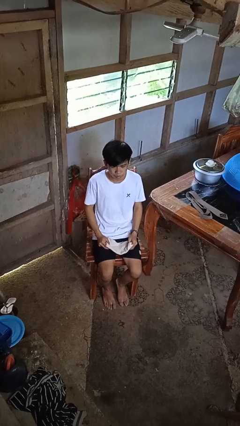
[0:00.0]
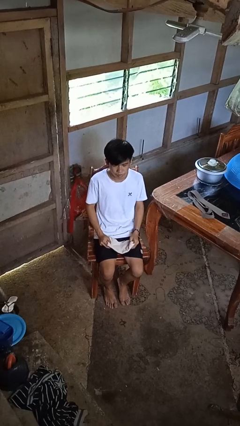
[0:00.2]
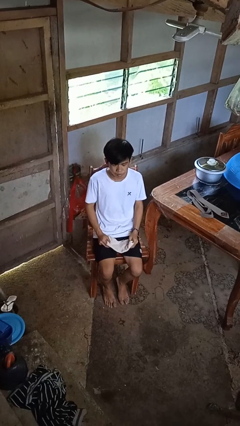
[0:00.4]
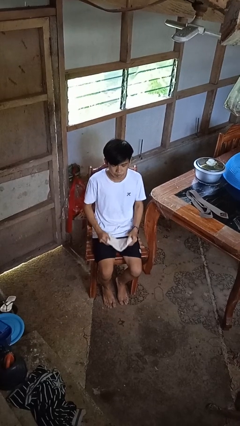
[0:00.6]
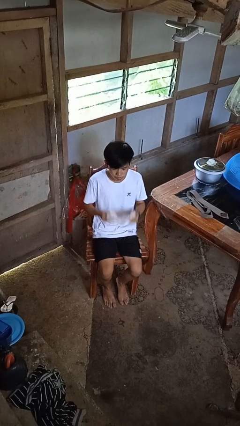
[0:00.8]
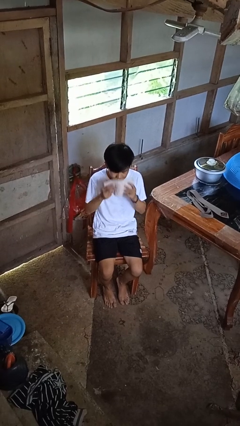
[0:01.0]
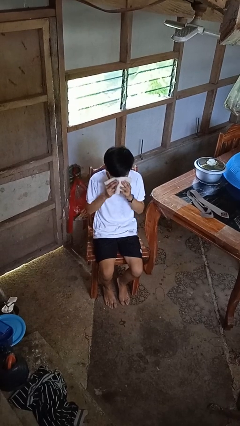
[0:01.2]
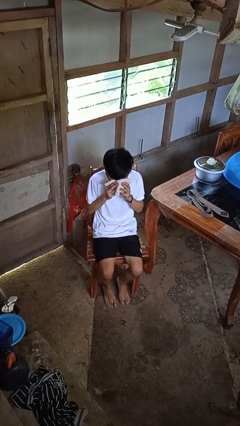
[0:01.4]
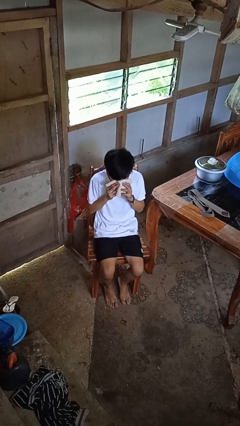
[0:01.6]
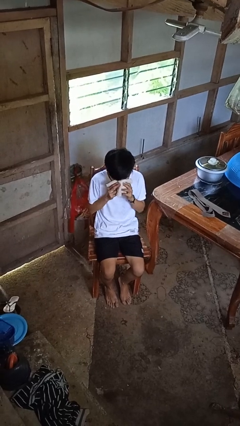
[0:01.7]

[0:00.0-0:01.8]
person blows nose

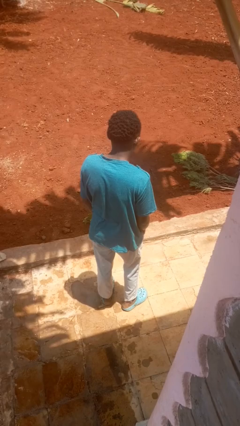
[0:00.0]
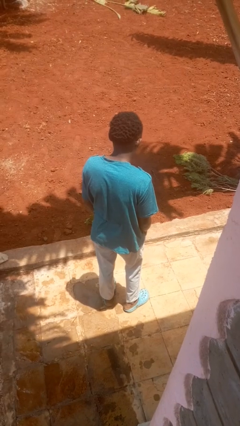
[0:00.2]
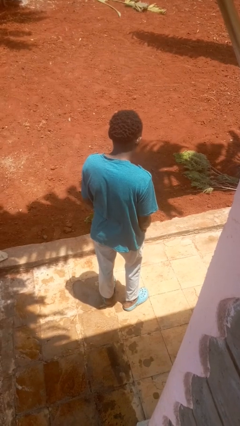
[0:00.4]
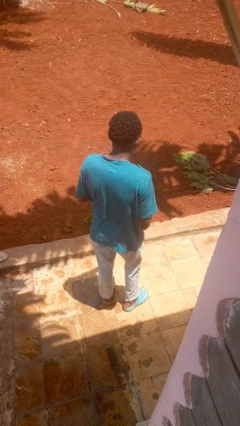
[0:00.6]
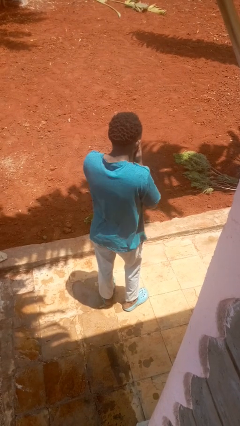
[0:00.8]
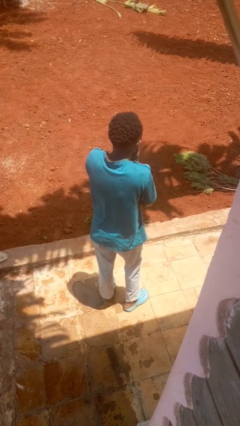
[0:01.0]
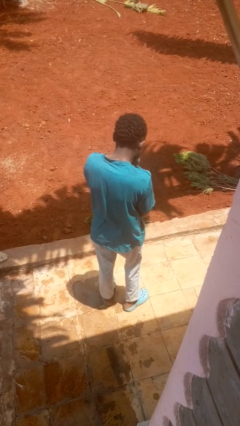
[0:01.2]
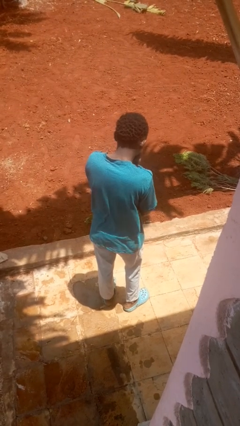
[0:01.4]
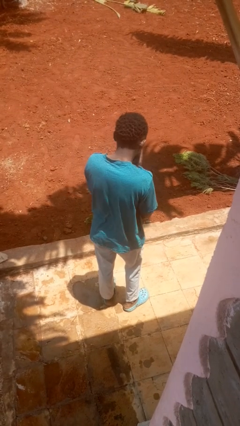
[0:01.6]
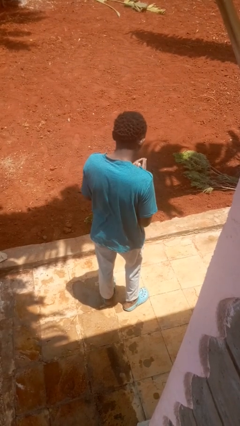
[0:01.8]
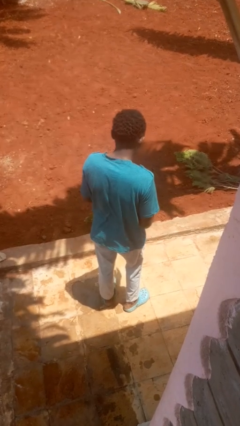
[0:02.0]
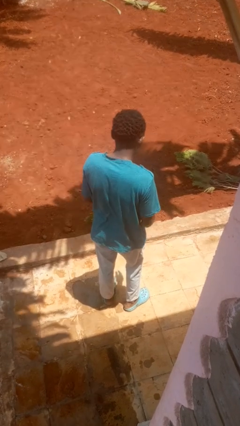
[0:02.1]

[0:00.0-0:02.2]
person sneezes into hand

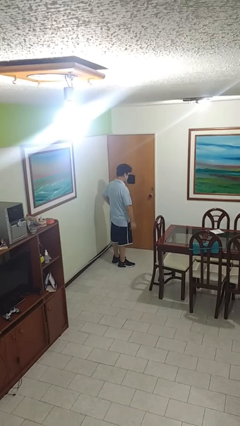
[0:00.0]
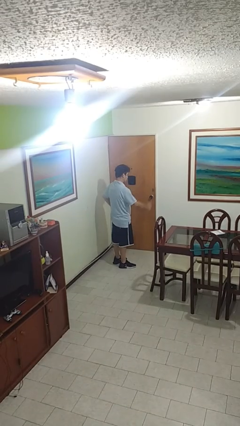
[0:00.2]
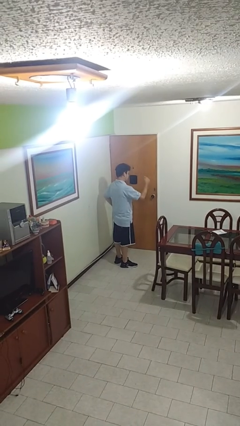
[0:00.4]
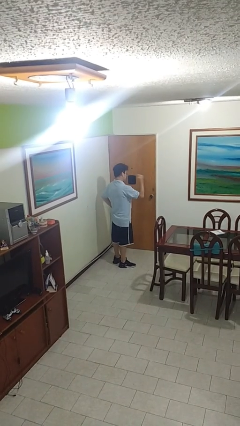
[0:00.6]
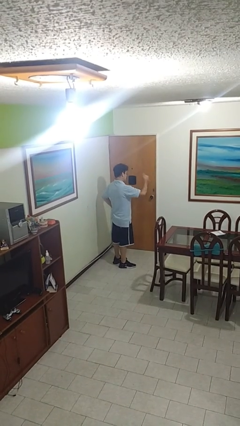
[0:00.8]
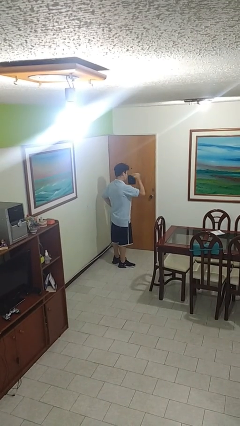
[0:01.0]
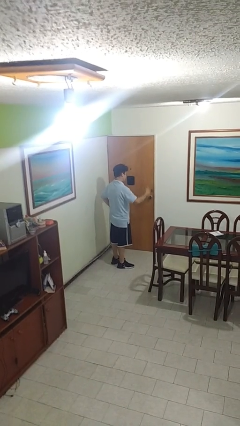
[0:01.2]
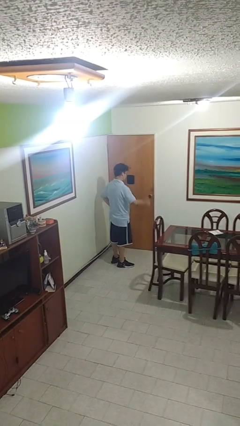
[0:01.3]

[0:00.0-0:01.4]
person gestures behind me

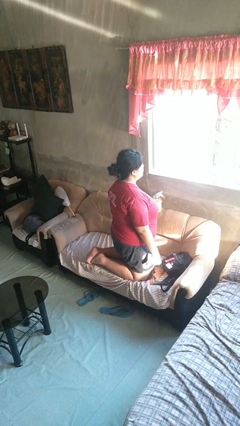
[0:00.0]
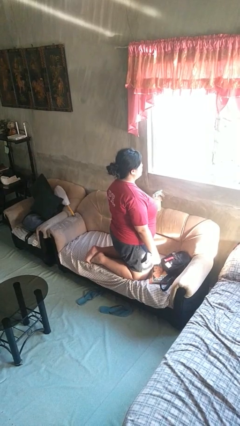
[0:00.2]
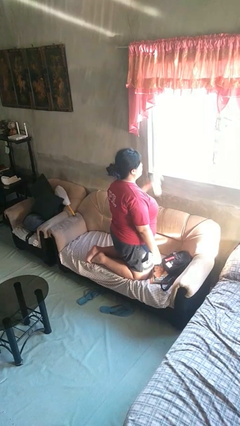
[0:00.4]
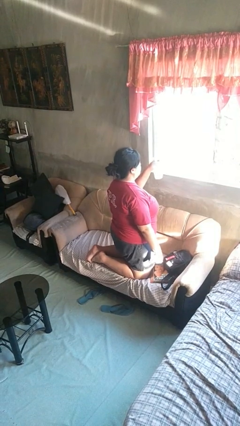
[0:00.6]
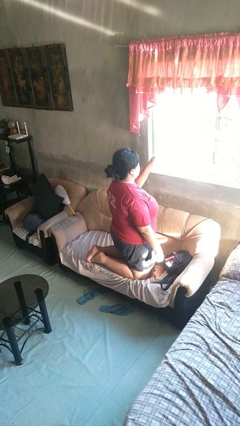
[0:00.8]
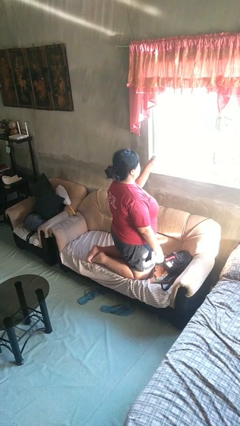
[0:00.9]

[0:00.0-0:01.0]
person sprays from bottle

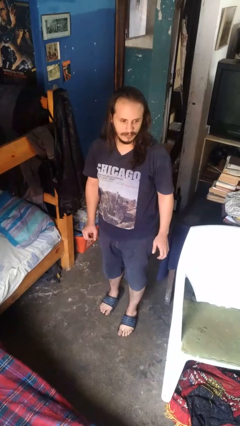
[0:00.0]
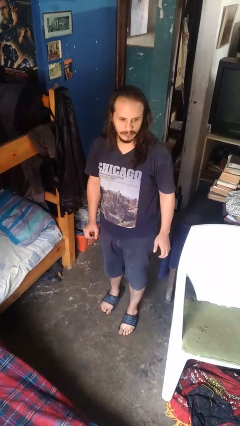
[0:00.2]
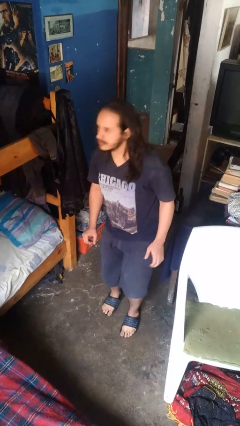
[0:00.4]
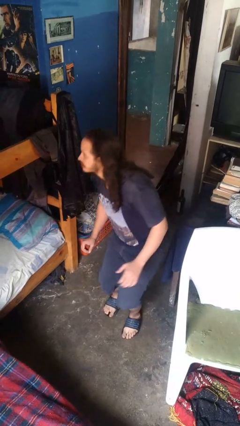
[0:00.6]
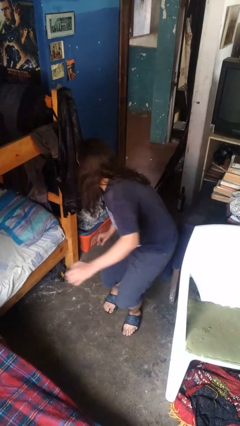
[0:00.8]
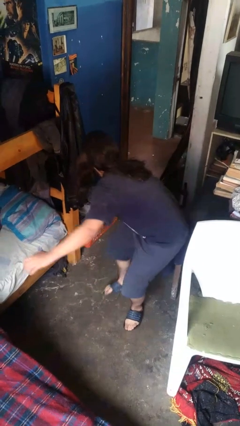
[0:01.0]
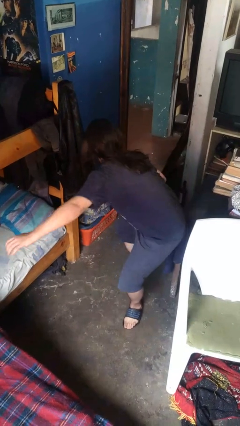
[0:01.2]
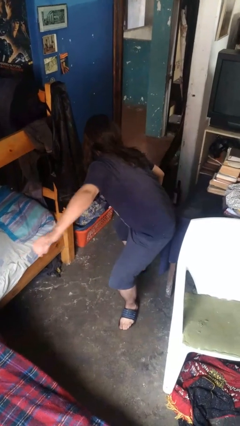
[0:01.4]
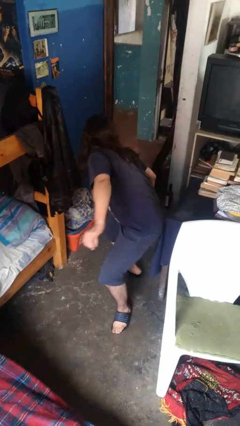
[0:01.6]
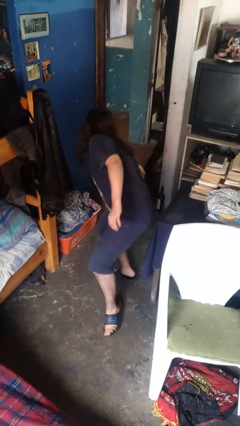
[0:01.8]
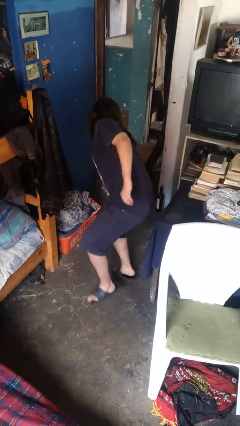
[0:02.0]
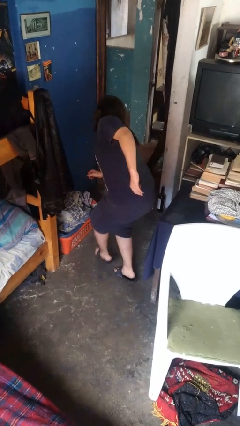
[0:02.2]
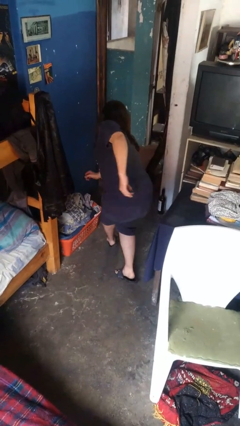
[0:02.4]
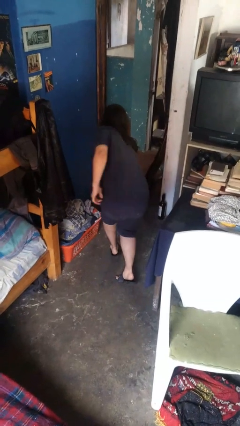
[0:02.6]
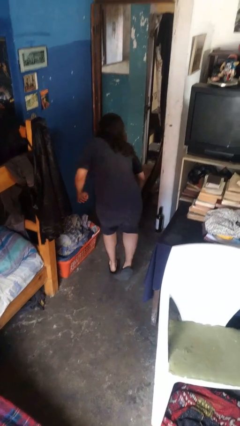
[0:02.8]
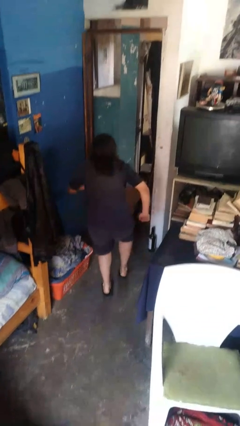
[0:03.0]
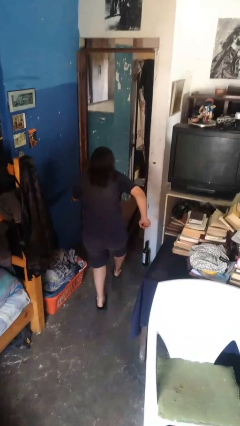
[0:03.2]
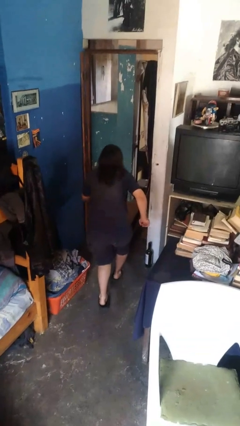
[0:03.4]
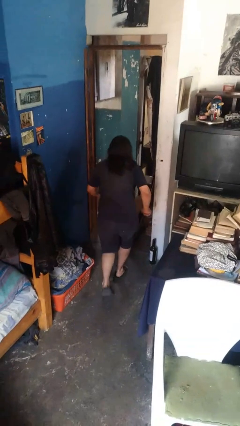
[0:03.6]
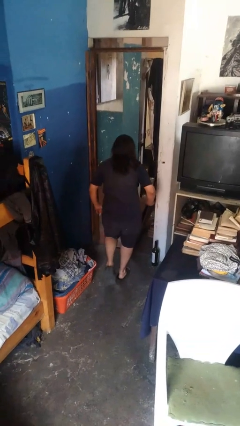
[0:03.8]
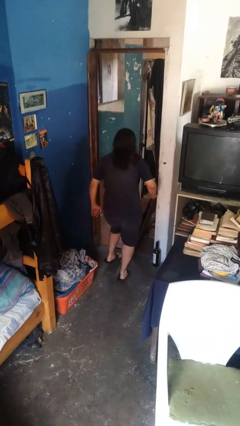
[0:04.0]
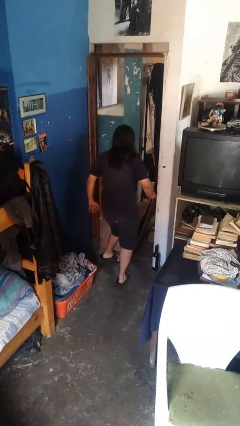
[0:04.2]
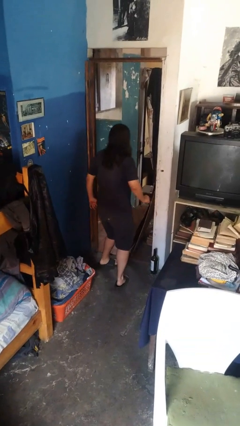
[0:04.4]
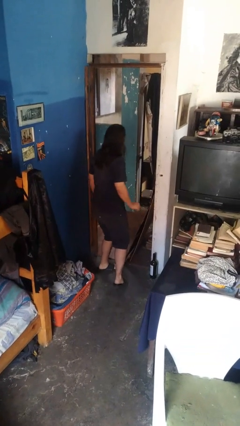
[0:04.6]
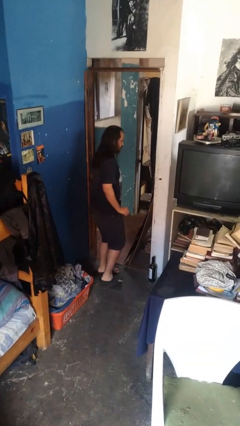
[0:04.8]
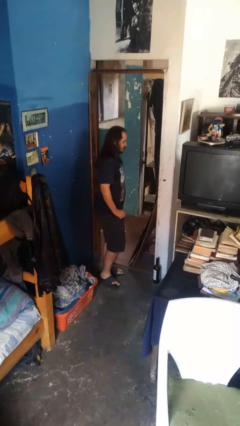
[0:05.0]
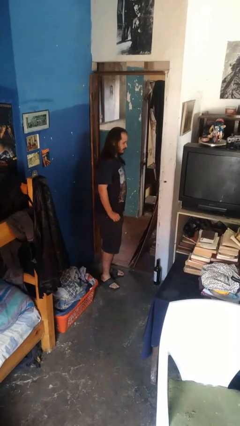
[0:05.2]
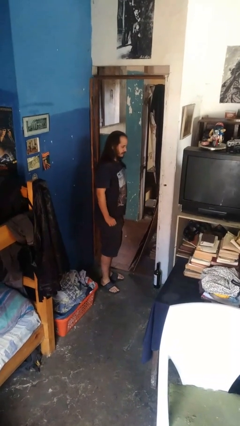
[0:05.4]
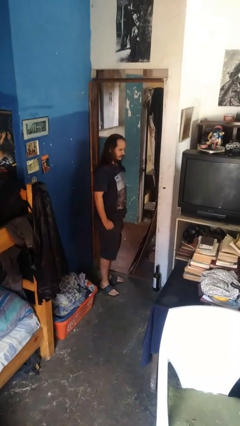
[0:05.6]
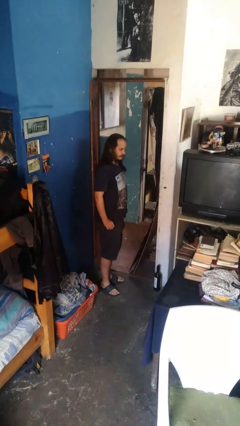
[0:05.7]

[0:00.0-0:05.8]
person walks tiptoe

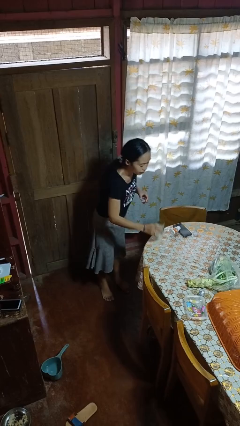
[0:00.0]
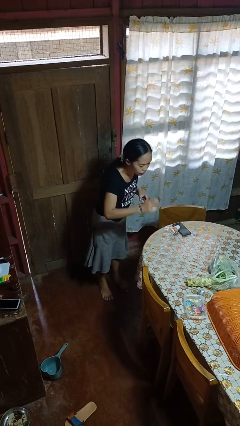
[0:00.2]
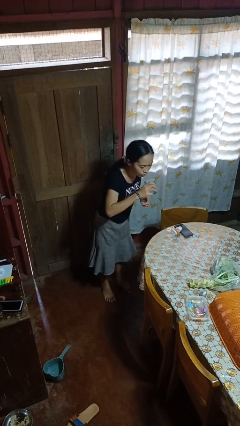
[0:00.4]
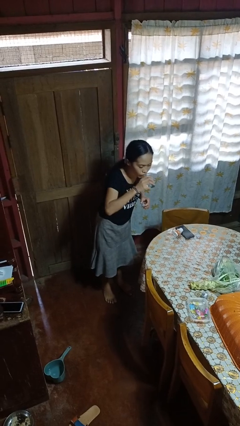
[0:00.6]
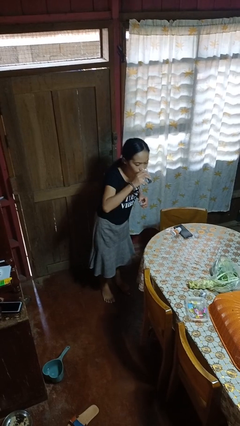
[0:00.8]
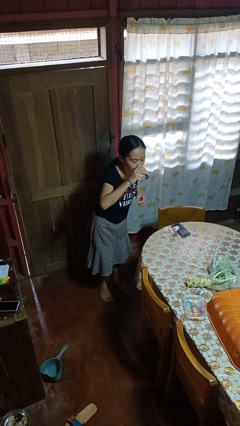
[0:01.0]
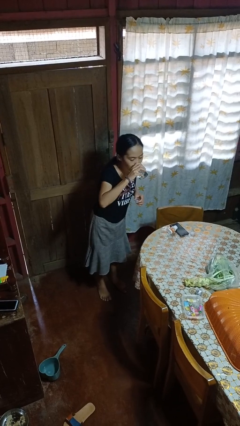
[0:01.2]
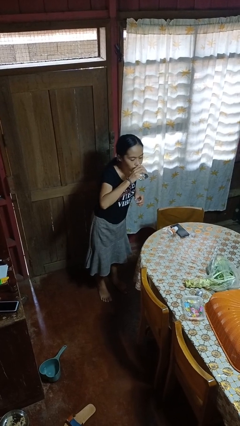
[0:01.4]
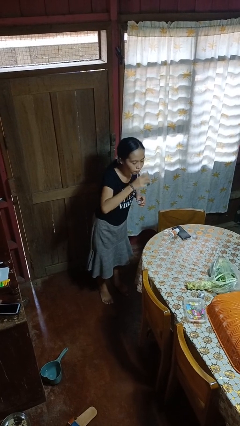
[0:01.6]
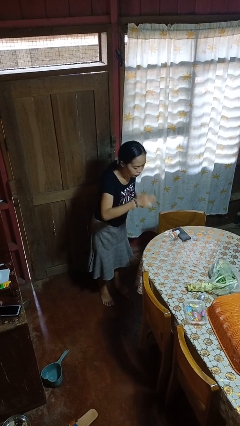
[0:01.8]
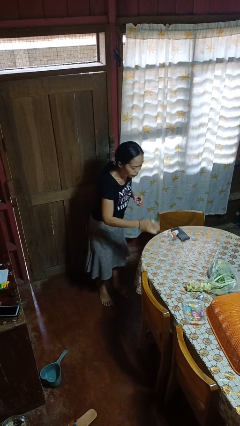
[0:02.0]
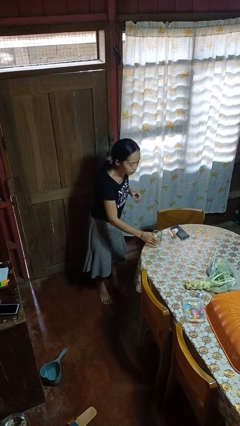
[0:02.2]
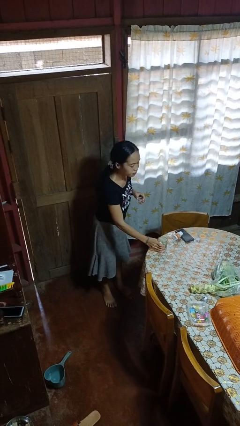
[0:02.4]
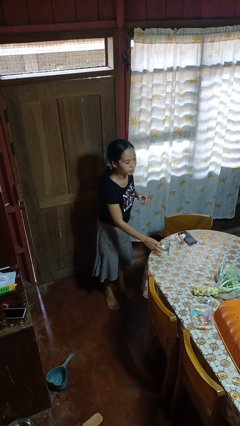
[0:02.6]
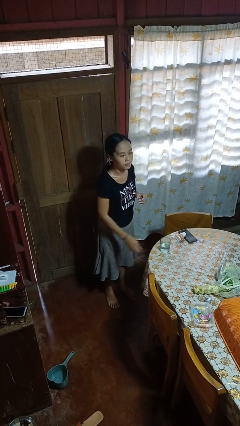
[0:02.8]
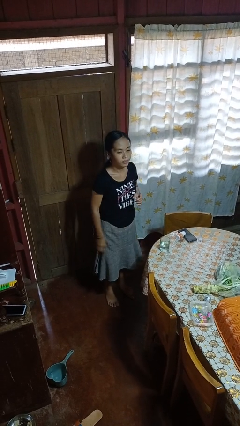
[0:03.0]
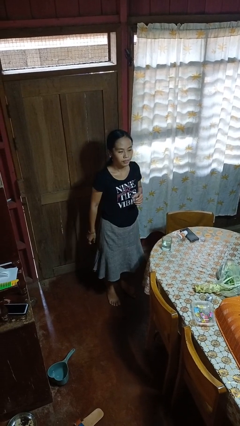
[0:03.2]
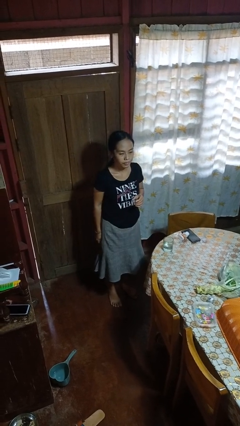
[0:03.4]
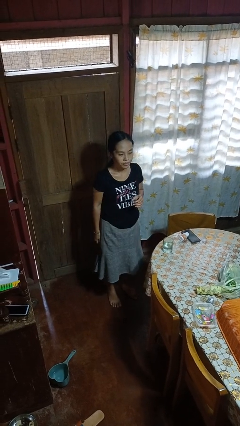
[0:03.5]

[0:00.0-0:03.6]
person drinks from cup

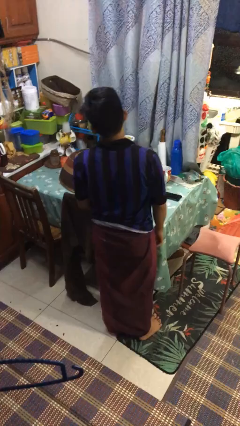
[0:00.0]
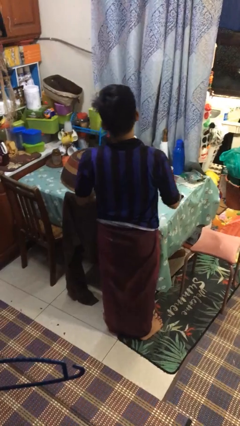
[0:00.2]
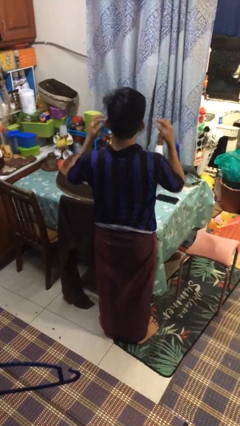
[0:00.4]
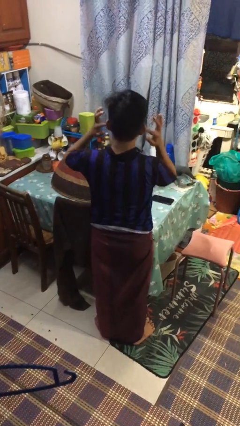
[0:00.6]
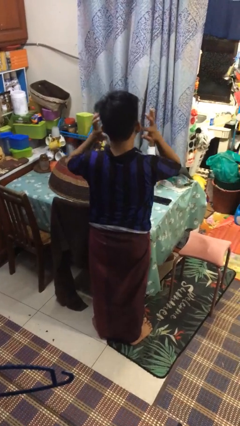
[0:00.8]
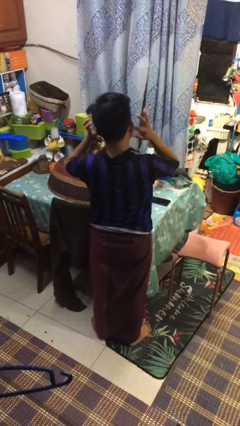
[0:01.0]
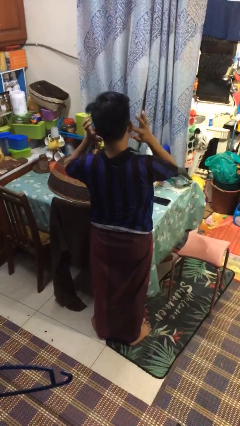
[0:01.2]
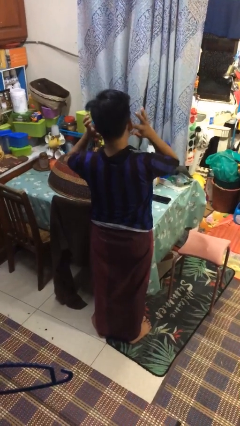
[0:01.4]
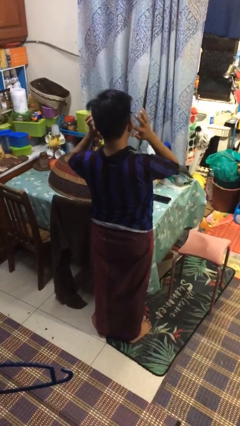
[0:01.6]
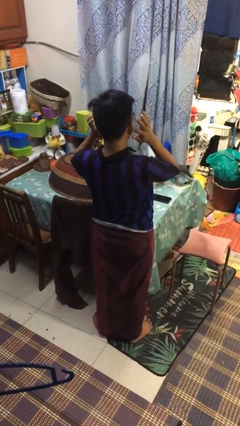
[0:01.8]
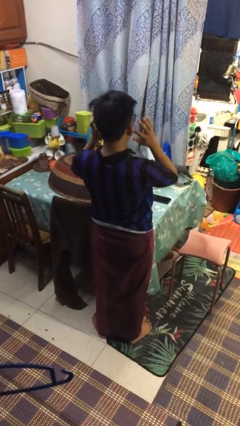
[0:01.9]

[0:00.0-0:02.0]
person puts fingers in ear
